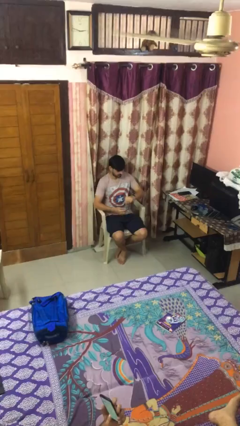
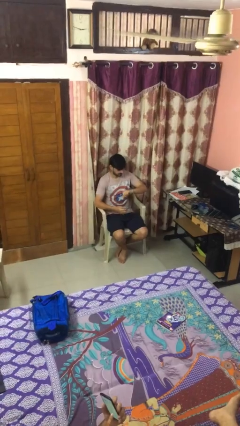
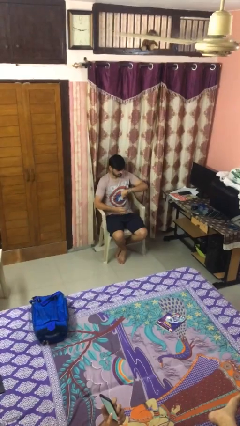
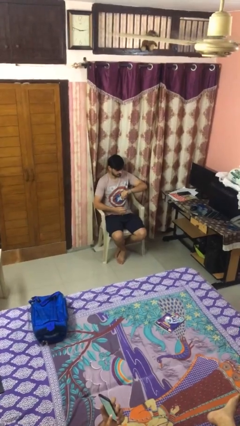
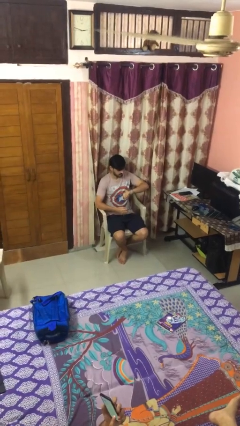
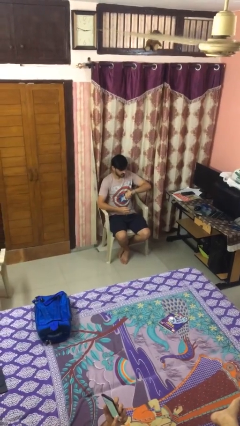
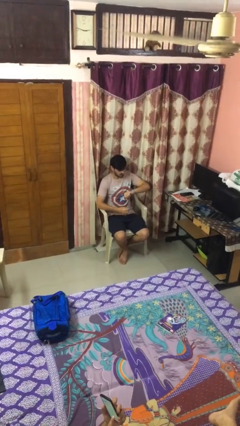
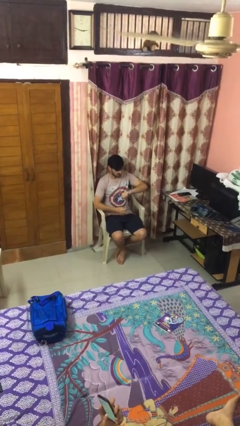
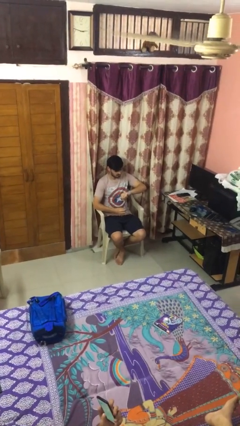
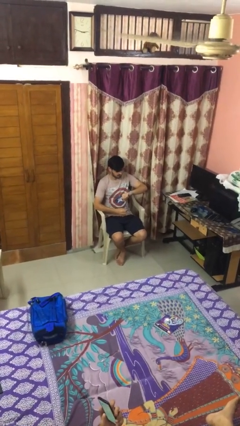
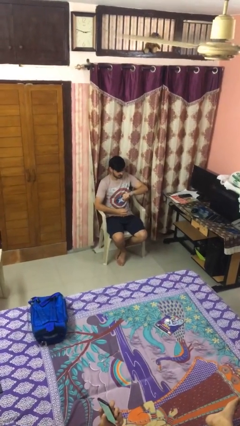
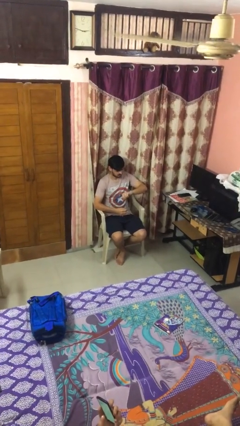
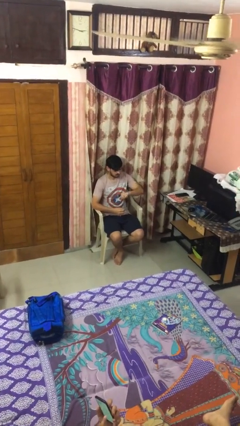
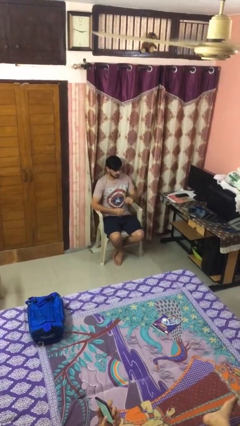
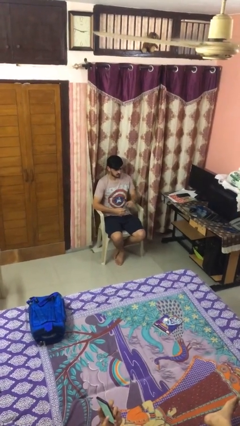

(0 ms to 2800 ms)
person looks at wristwatch

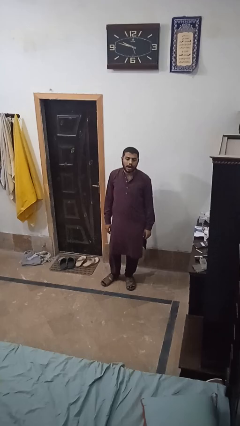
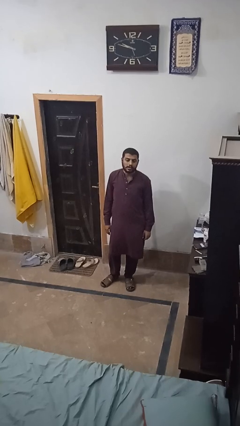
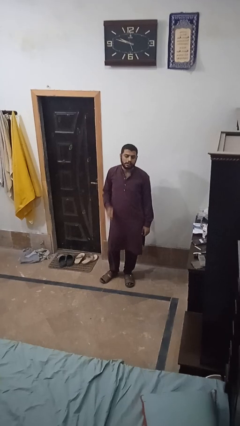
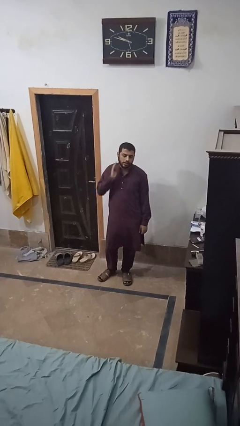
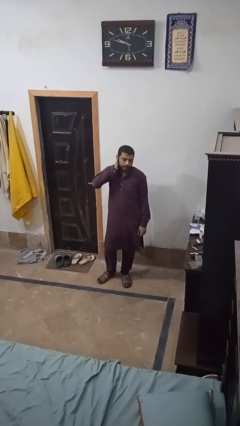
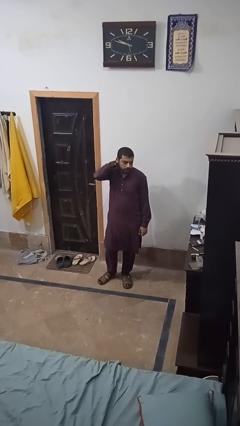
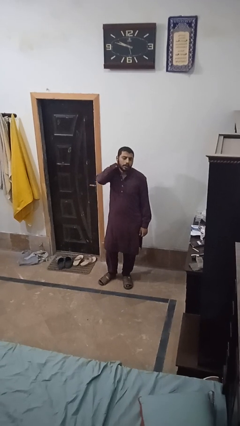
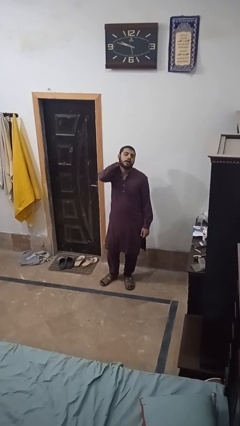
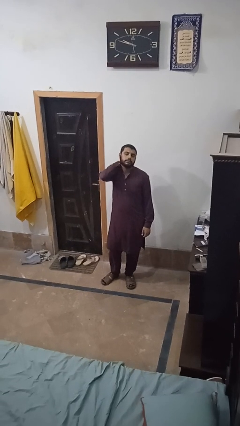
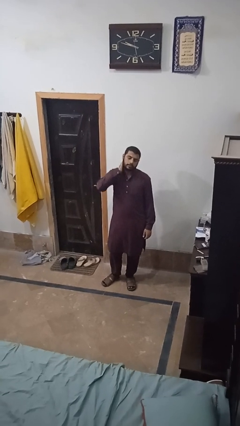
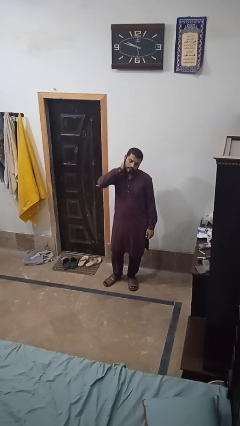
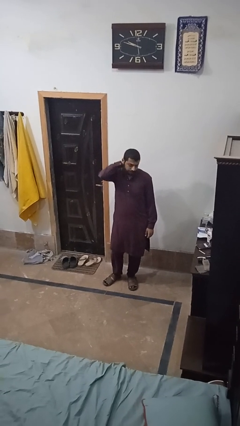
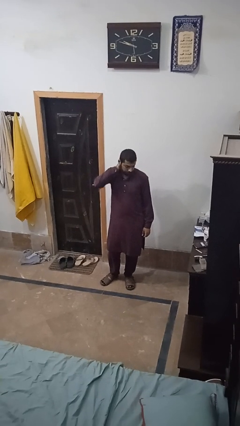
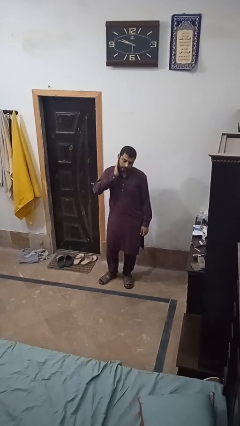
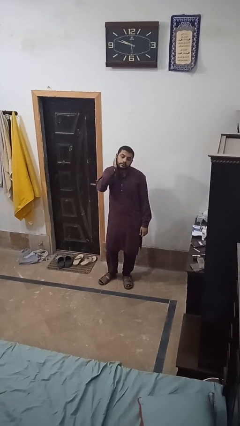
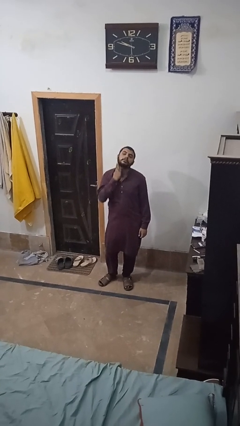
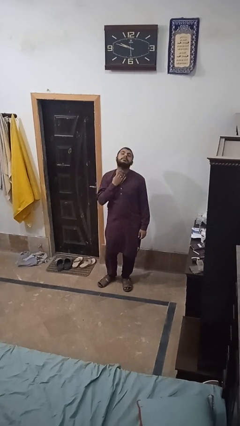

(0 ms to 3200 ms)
person rubs neck

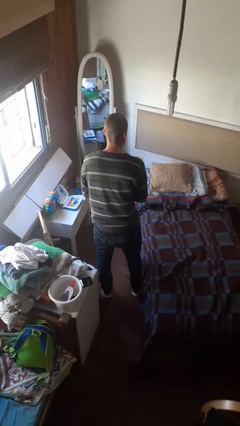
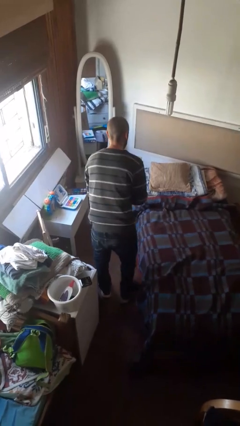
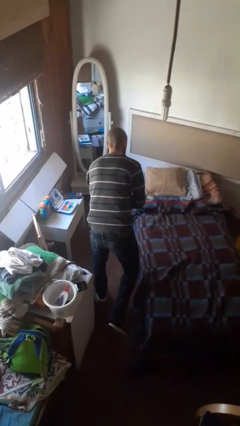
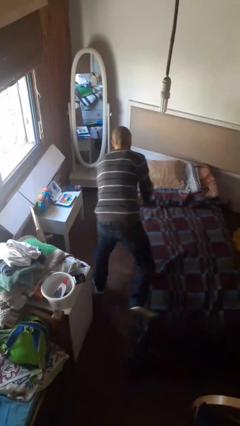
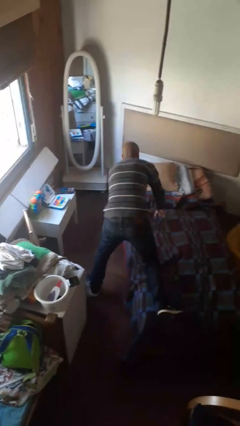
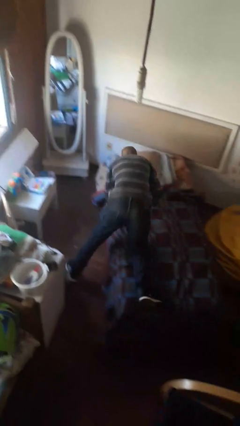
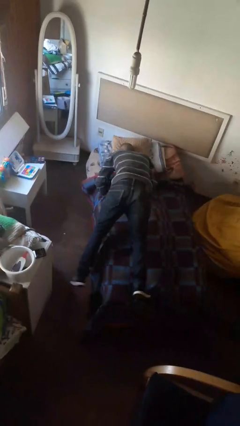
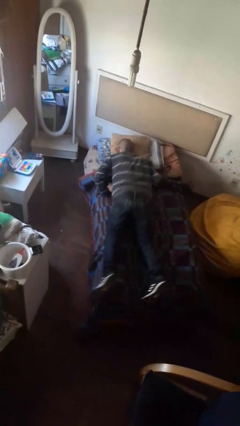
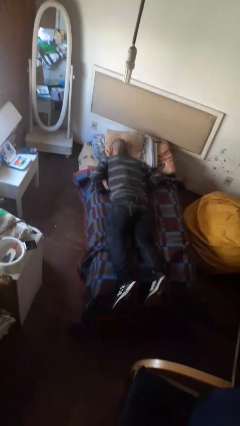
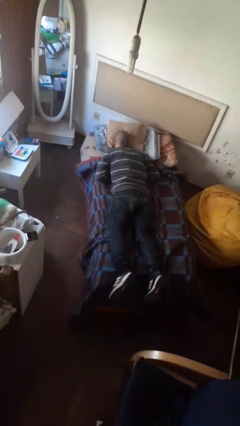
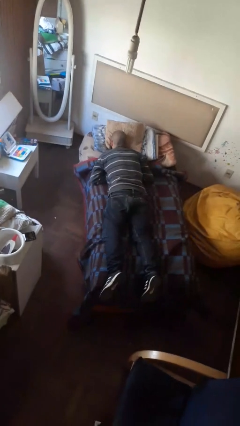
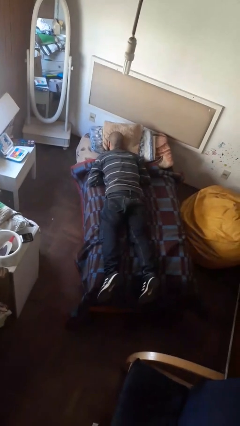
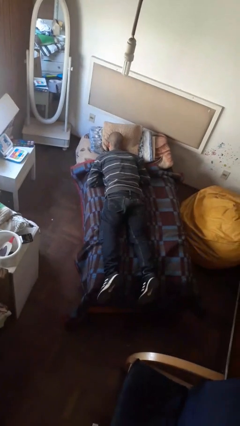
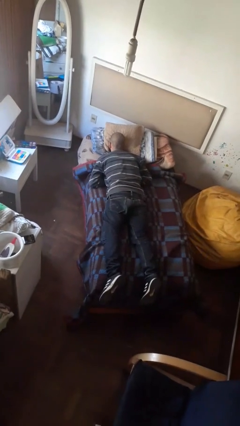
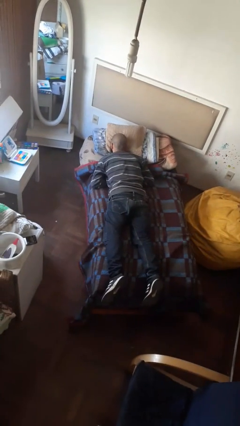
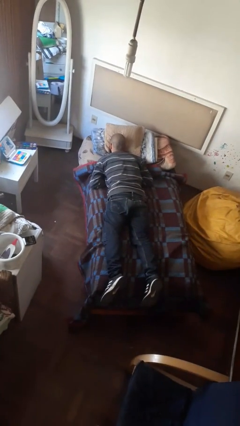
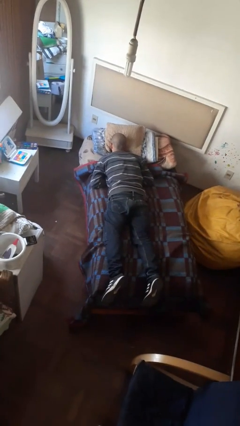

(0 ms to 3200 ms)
person lies down on bed

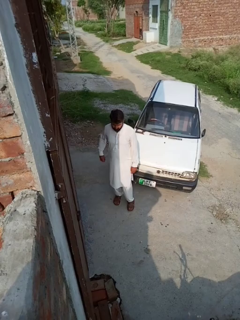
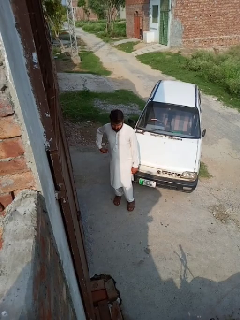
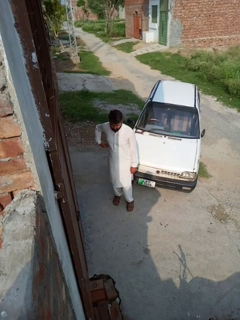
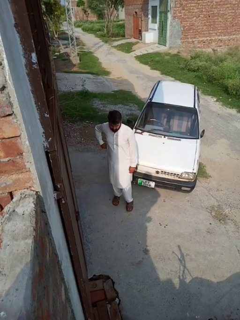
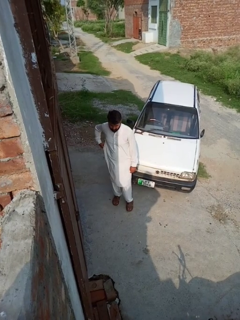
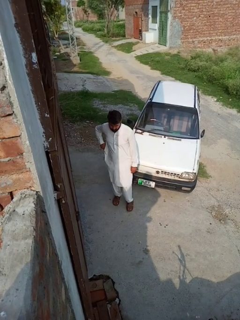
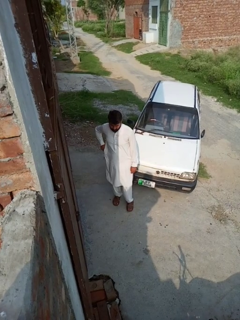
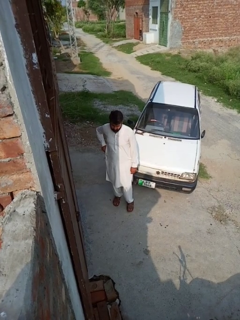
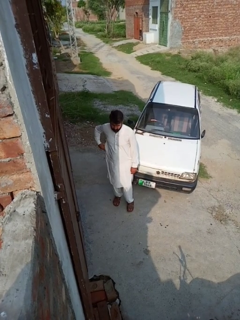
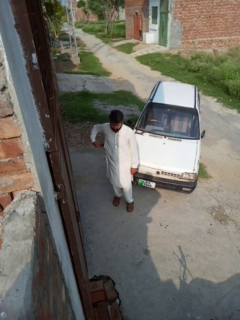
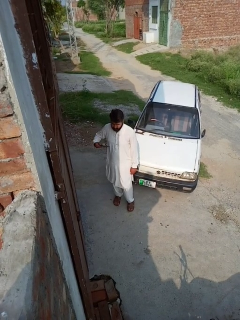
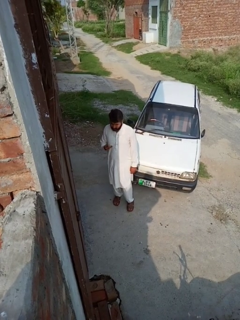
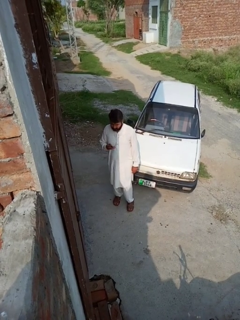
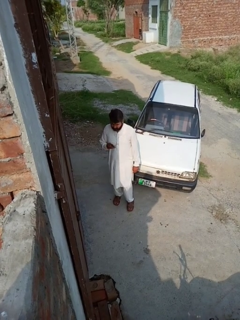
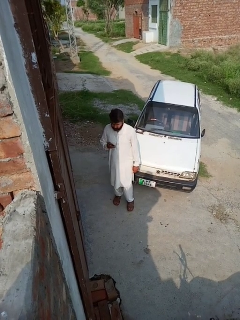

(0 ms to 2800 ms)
person takes phone from pocket

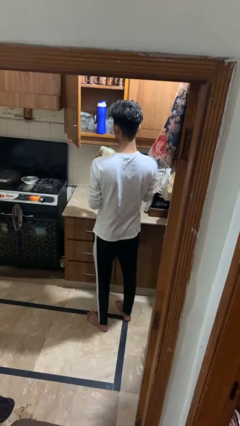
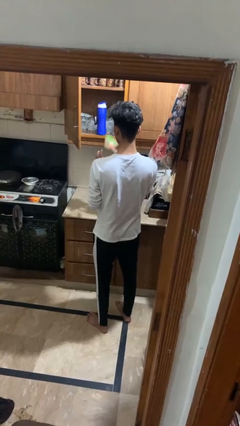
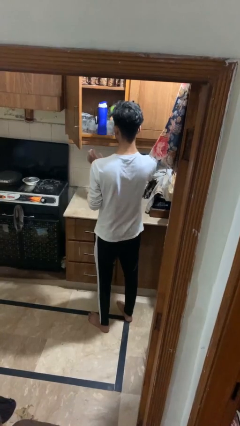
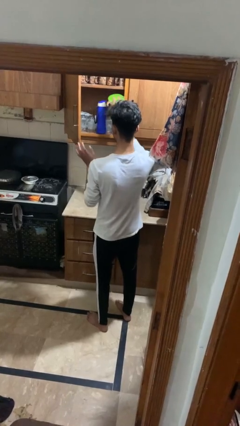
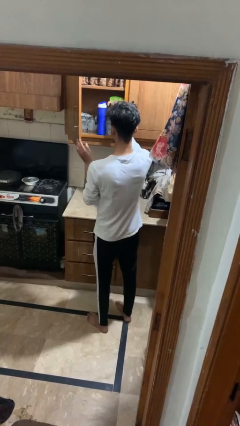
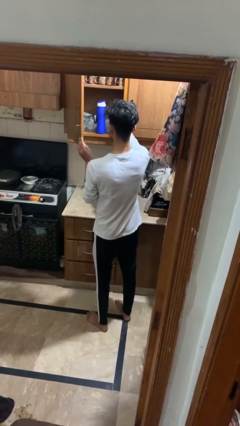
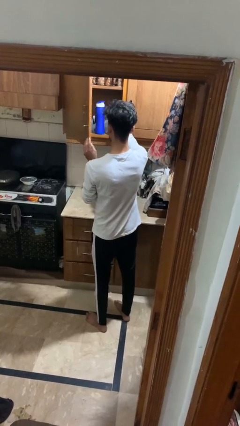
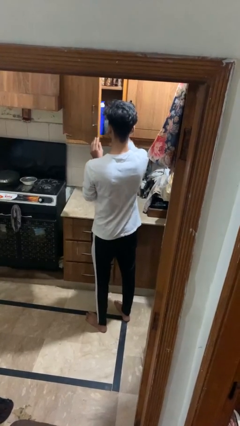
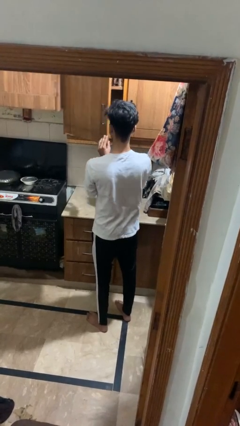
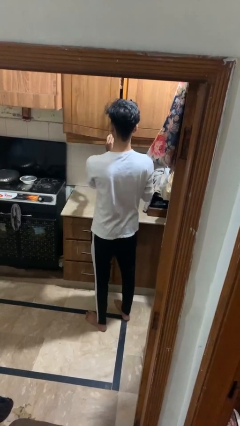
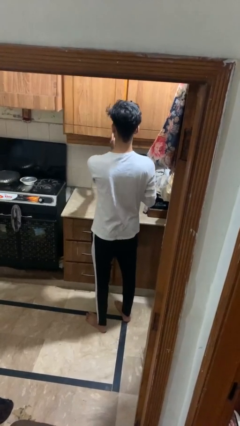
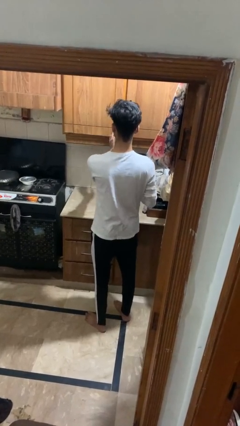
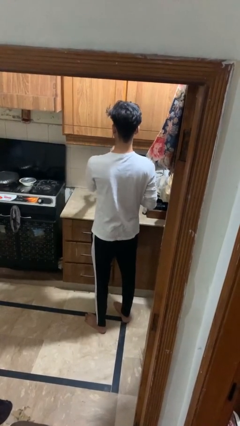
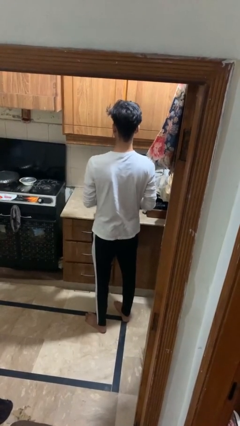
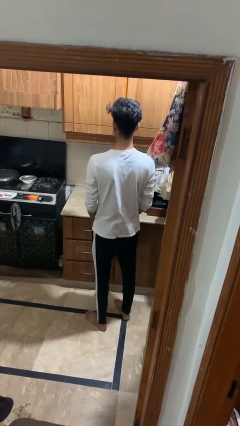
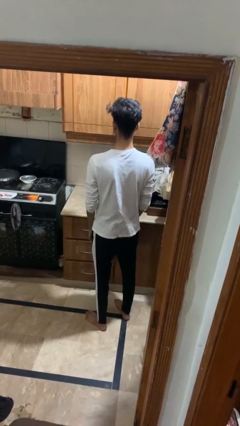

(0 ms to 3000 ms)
person takes object from cabinet

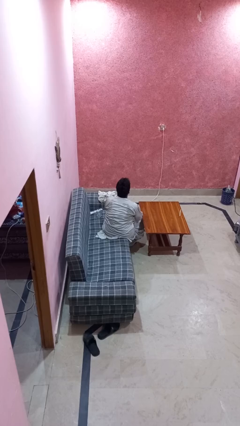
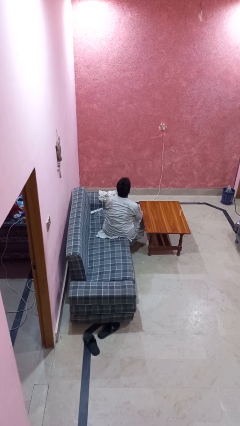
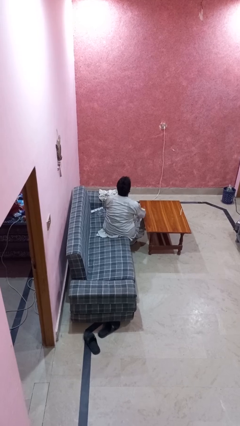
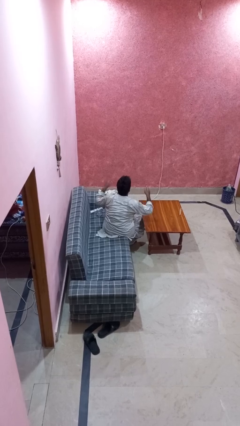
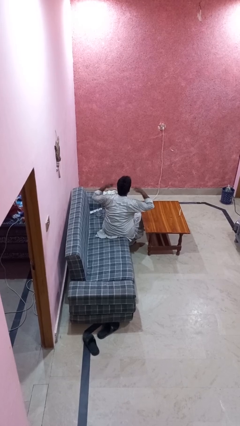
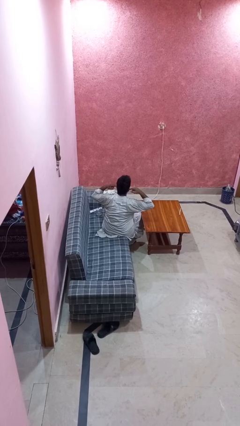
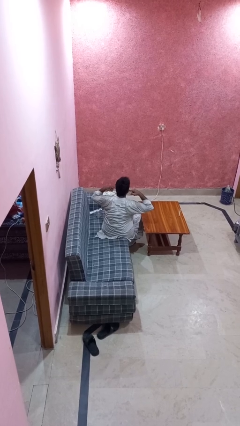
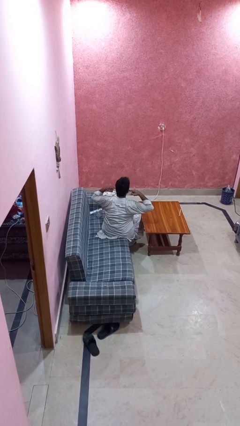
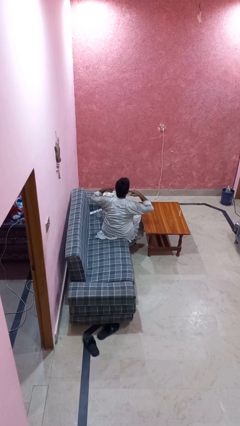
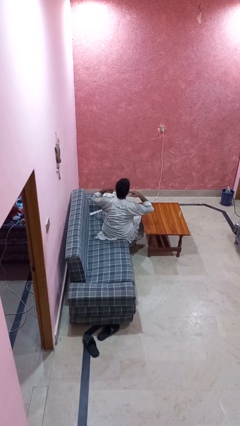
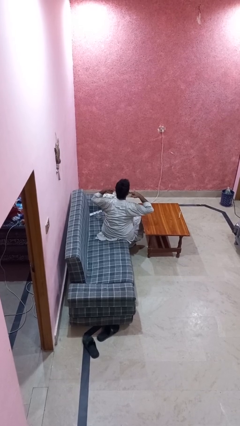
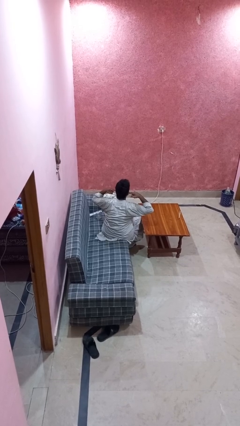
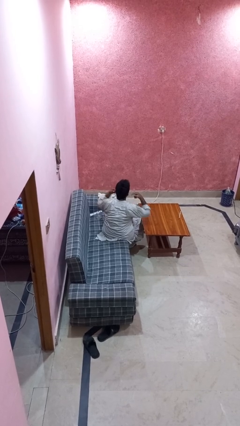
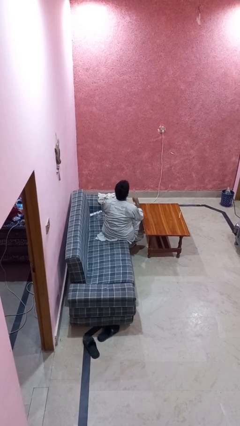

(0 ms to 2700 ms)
person puts fingers in ear

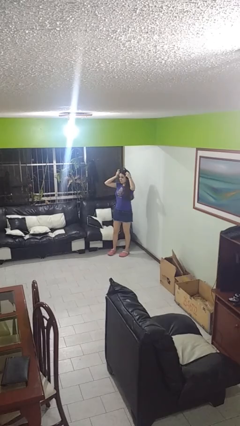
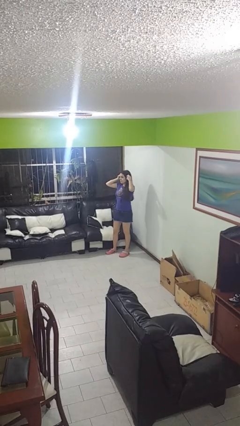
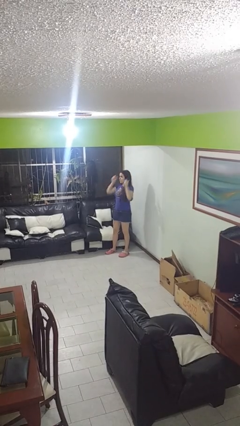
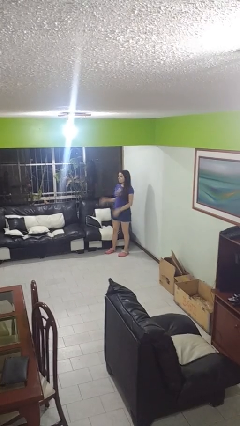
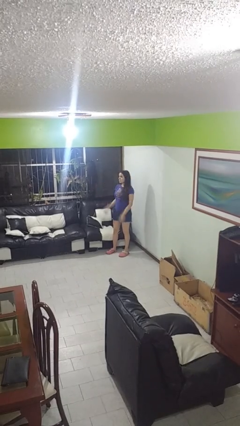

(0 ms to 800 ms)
person puts on headphones
